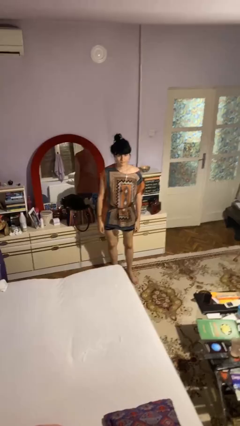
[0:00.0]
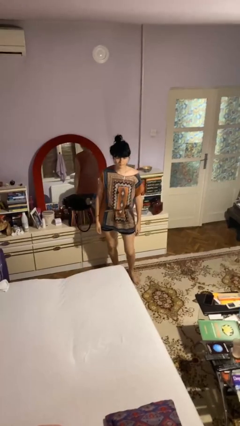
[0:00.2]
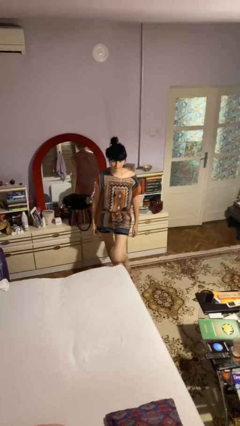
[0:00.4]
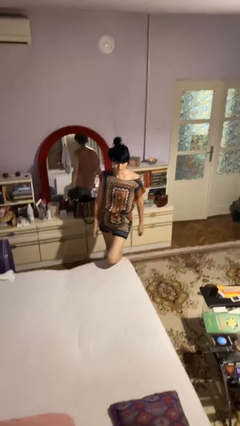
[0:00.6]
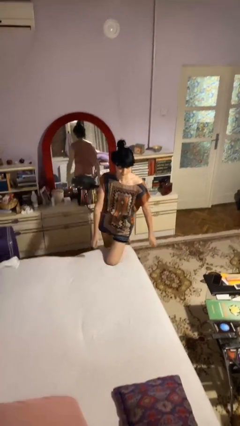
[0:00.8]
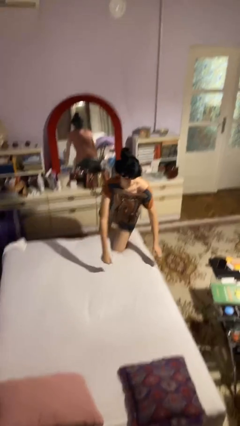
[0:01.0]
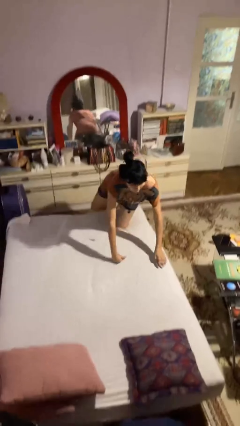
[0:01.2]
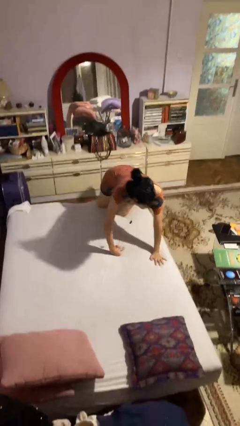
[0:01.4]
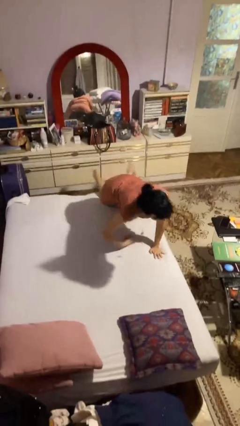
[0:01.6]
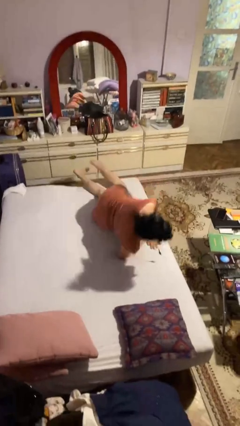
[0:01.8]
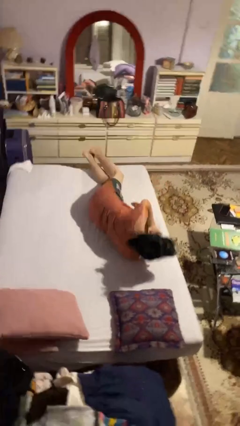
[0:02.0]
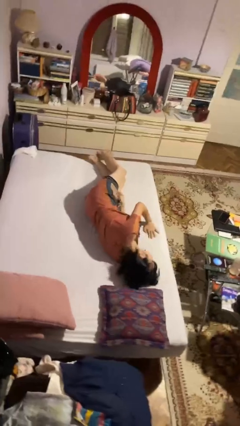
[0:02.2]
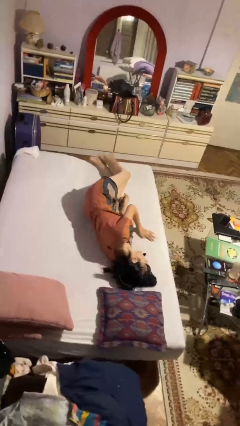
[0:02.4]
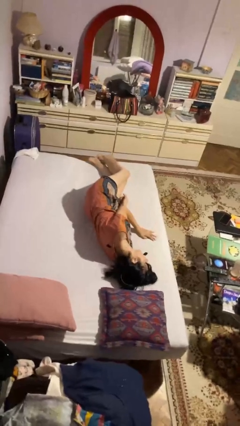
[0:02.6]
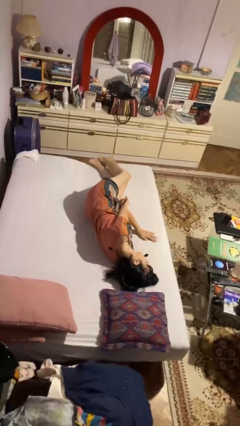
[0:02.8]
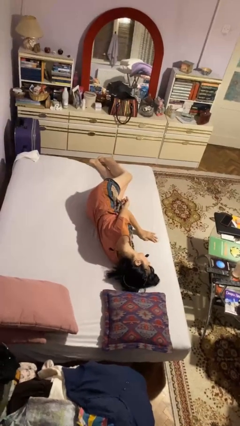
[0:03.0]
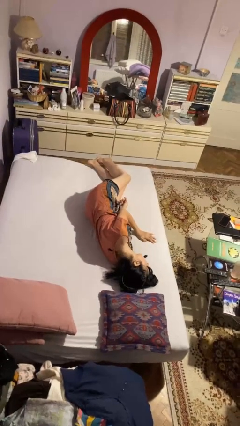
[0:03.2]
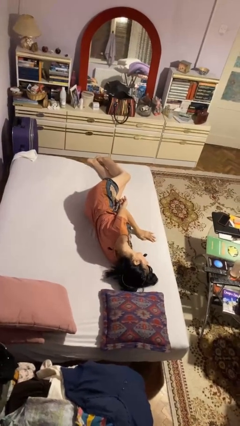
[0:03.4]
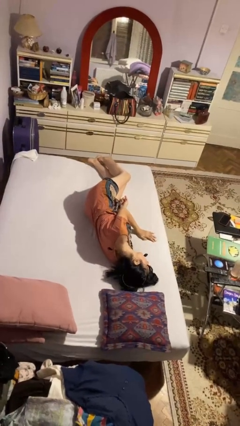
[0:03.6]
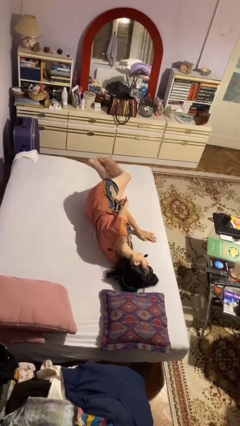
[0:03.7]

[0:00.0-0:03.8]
person lies down on bed

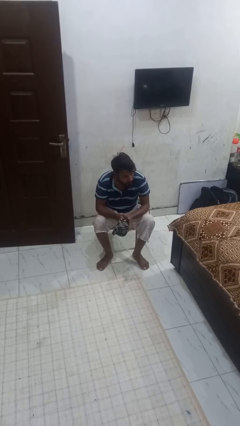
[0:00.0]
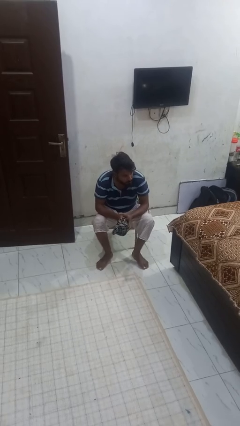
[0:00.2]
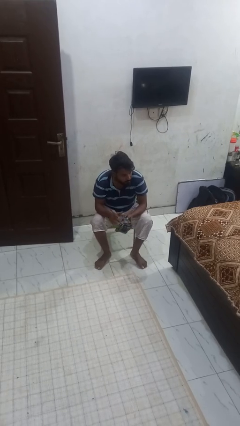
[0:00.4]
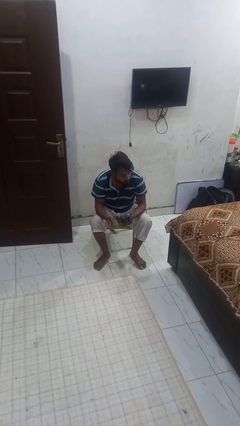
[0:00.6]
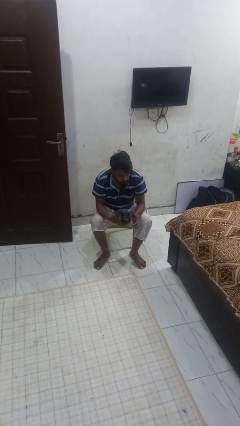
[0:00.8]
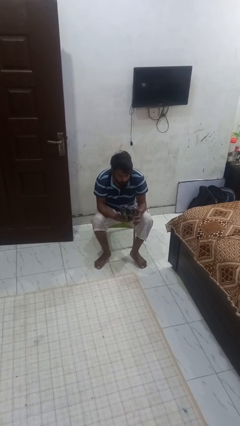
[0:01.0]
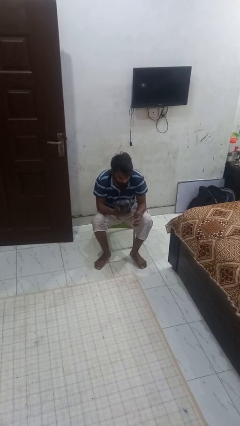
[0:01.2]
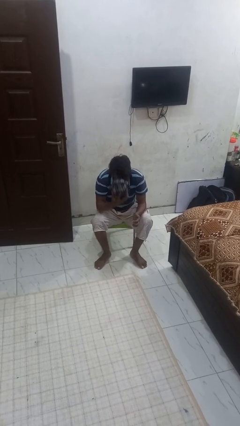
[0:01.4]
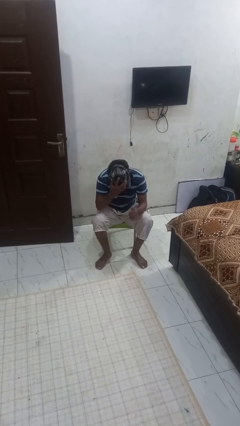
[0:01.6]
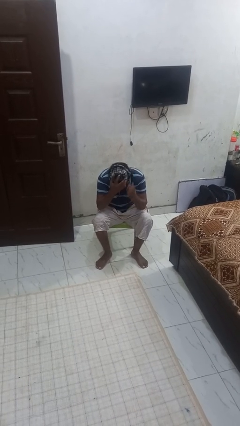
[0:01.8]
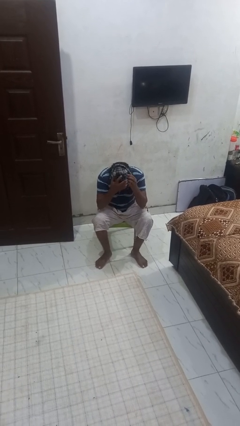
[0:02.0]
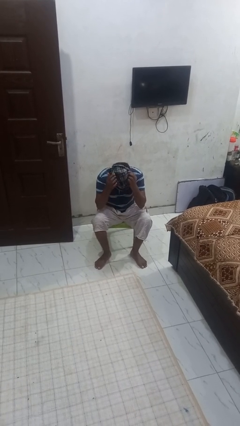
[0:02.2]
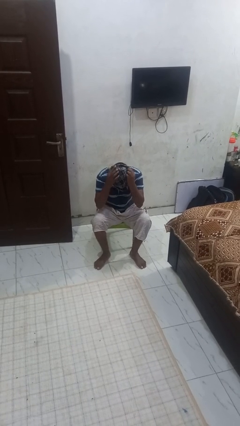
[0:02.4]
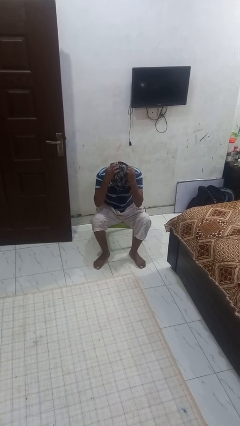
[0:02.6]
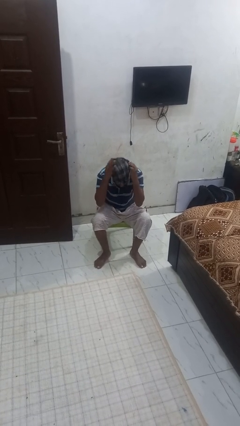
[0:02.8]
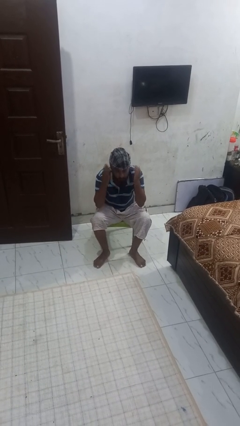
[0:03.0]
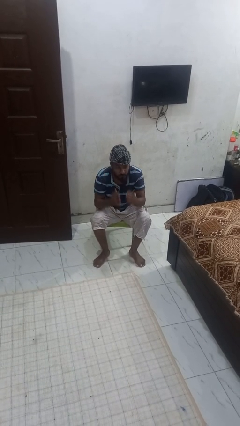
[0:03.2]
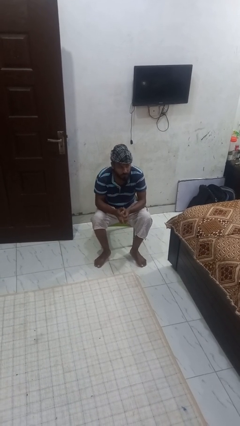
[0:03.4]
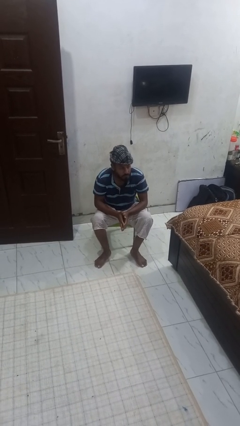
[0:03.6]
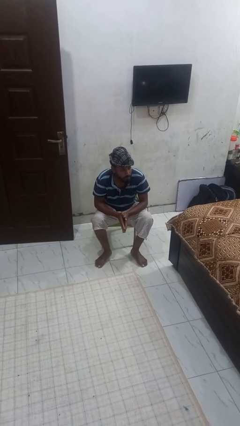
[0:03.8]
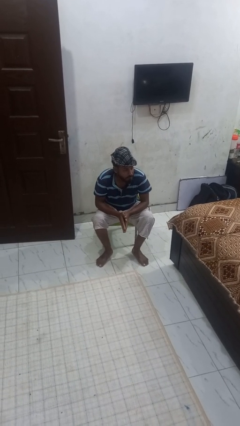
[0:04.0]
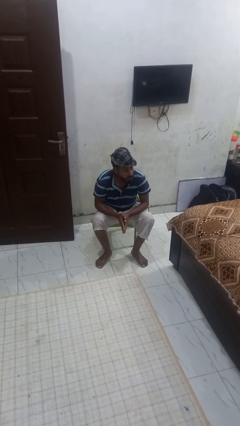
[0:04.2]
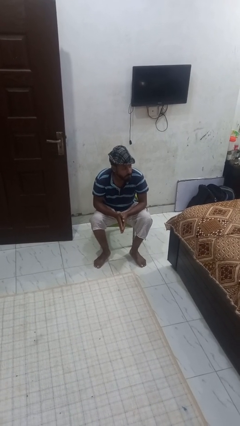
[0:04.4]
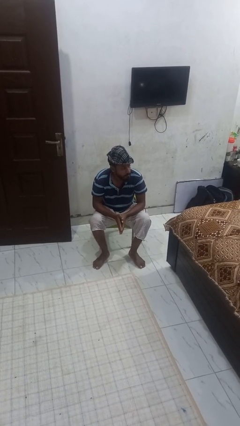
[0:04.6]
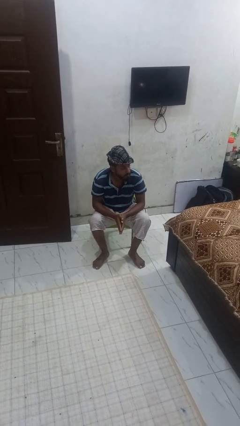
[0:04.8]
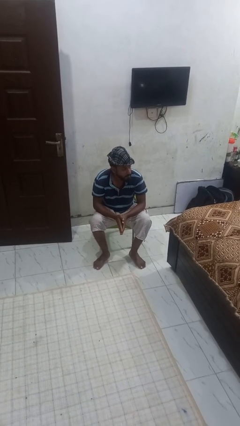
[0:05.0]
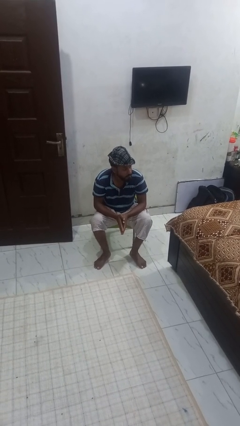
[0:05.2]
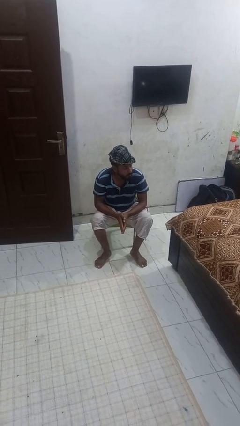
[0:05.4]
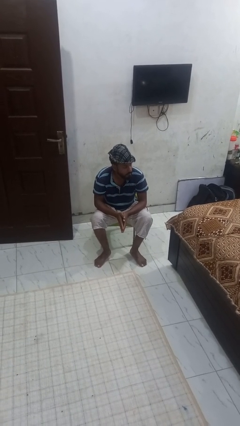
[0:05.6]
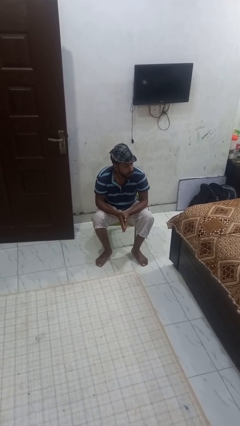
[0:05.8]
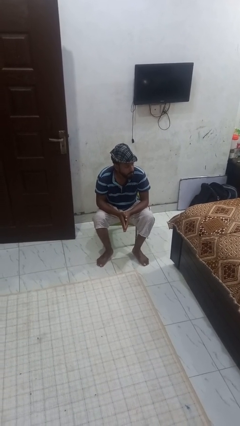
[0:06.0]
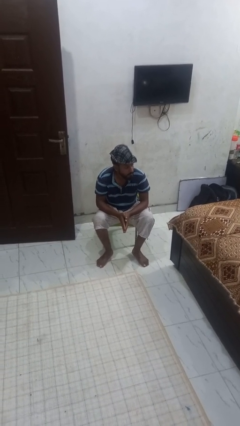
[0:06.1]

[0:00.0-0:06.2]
person puts on hat

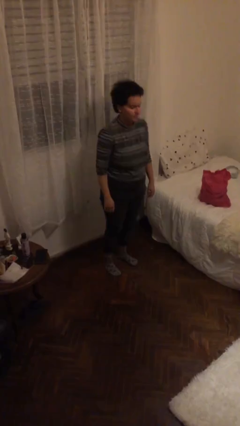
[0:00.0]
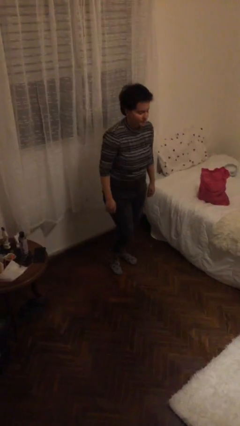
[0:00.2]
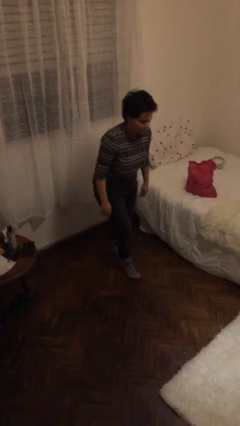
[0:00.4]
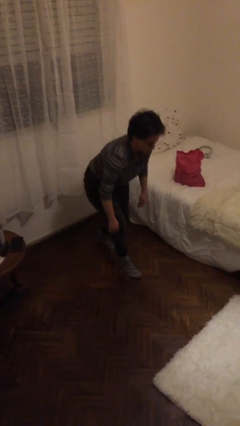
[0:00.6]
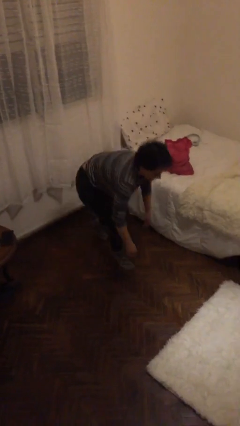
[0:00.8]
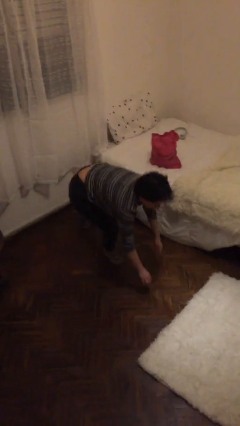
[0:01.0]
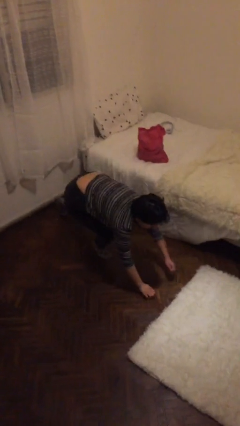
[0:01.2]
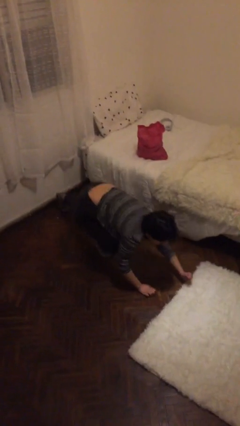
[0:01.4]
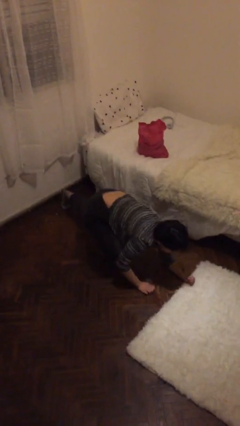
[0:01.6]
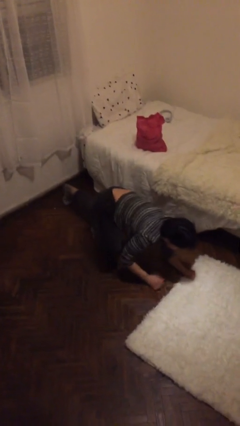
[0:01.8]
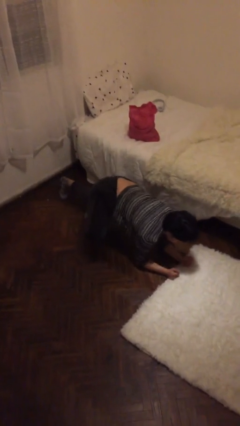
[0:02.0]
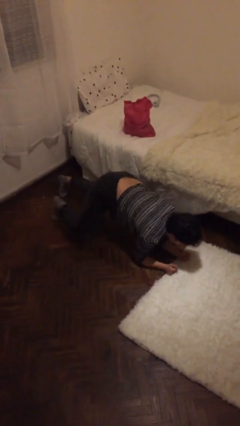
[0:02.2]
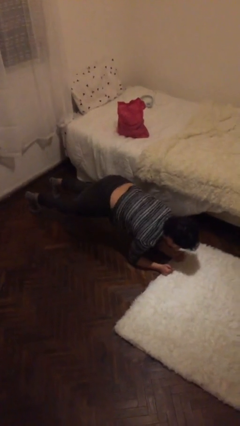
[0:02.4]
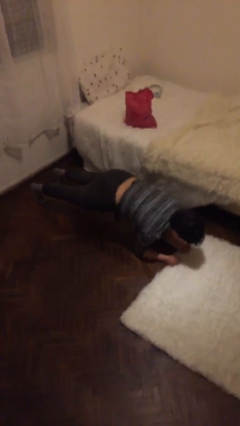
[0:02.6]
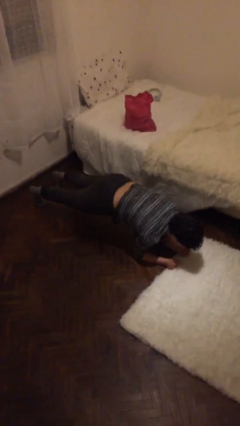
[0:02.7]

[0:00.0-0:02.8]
person exercises with plank

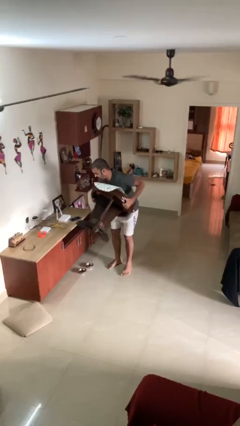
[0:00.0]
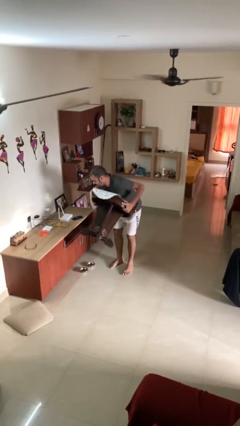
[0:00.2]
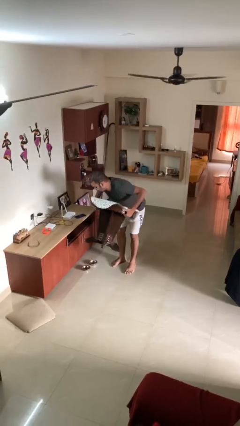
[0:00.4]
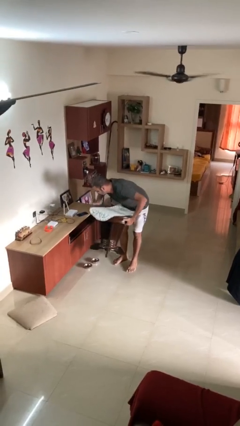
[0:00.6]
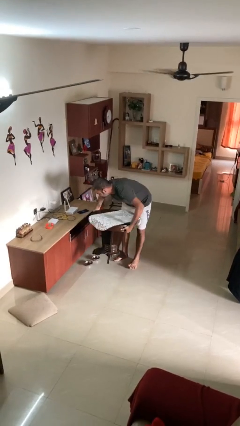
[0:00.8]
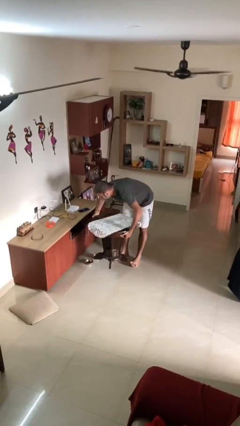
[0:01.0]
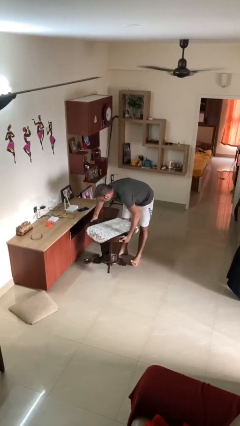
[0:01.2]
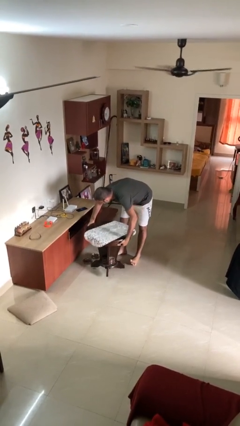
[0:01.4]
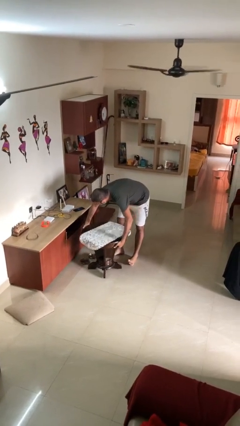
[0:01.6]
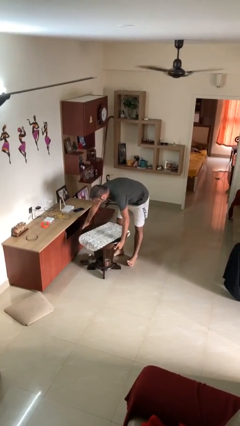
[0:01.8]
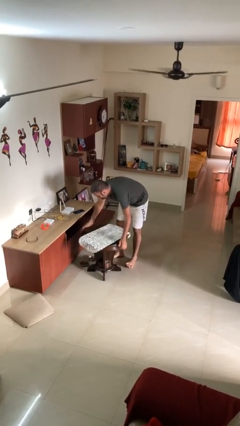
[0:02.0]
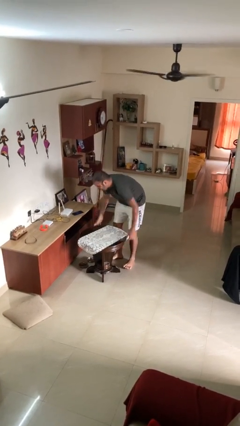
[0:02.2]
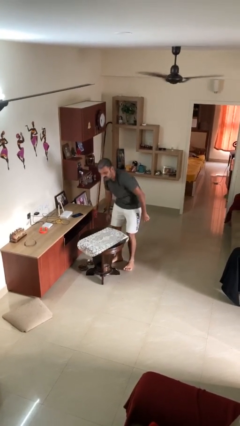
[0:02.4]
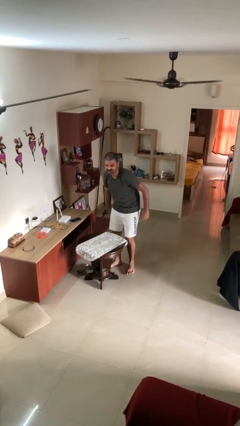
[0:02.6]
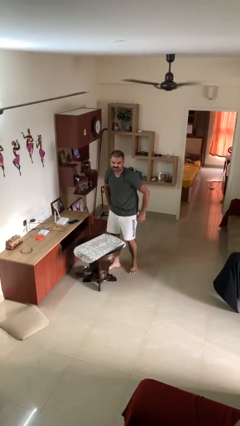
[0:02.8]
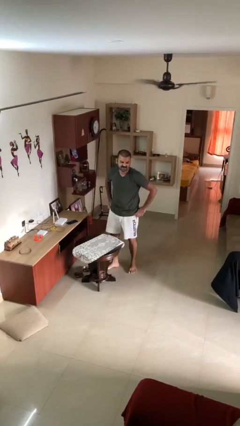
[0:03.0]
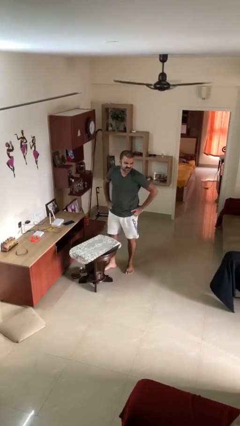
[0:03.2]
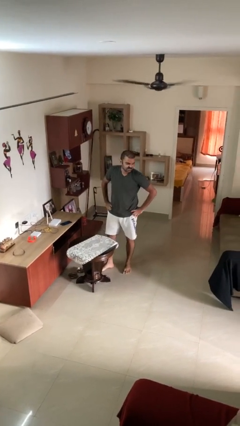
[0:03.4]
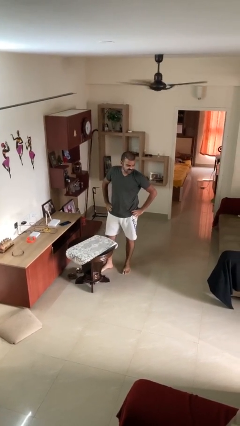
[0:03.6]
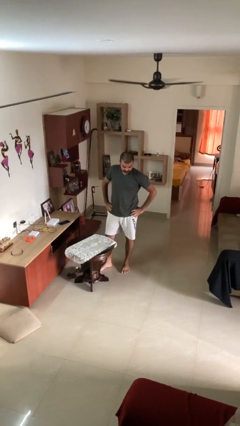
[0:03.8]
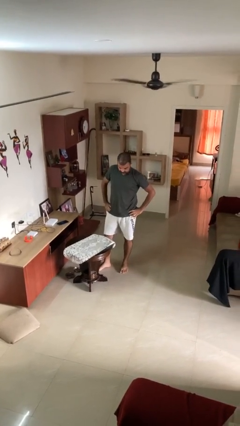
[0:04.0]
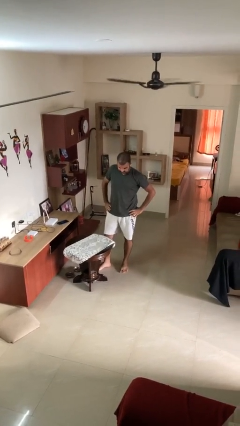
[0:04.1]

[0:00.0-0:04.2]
person puts down object on floor

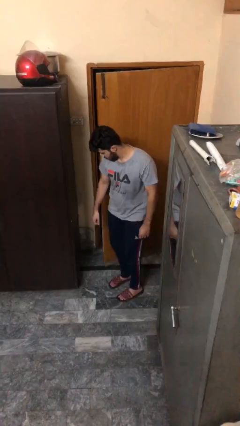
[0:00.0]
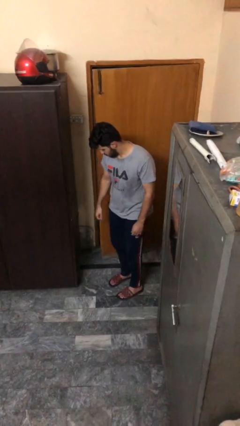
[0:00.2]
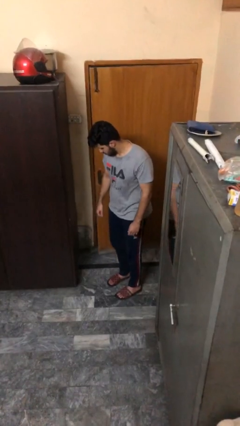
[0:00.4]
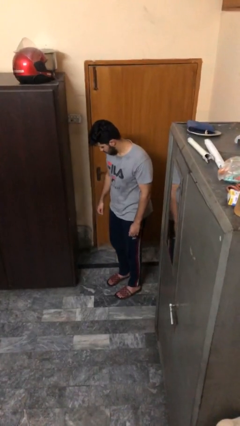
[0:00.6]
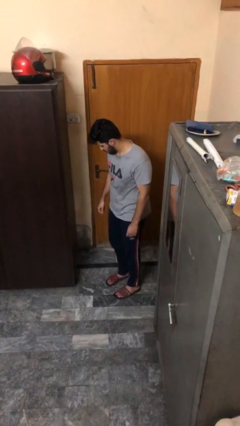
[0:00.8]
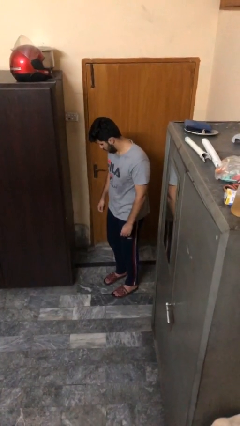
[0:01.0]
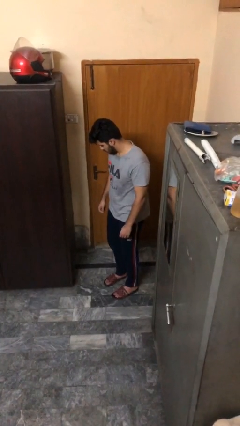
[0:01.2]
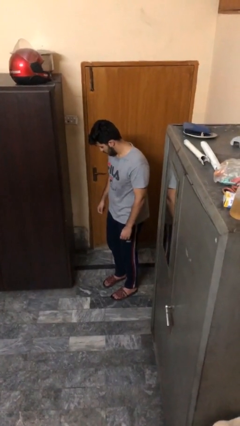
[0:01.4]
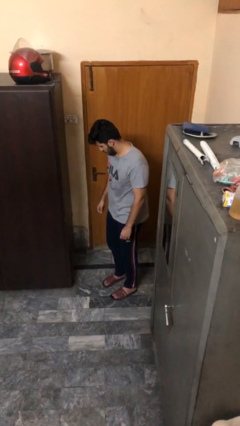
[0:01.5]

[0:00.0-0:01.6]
person closes door with hip
